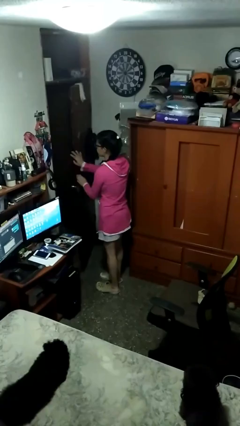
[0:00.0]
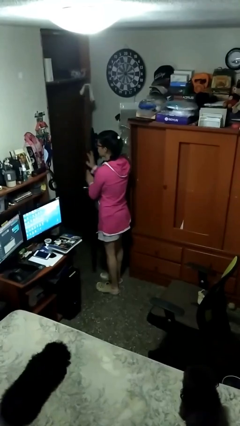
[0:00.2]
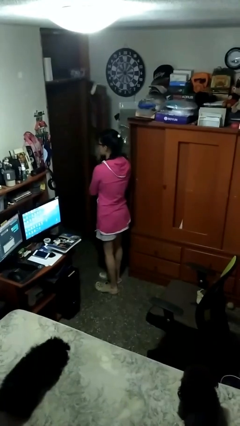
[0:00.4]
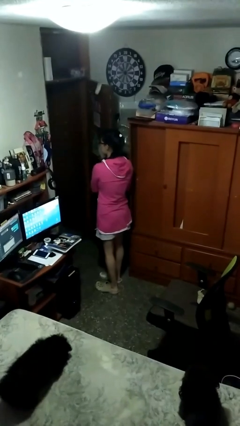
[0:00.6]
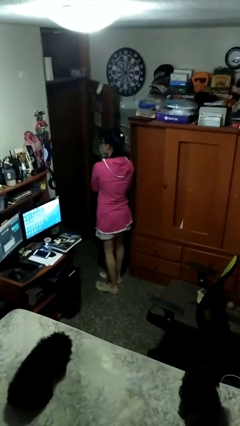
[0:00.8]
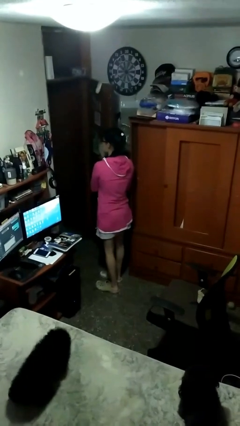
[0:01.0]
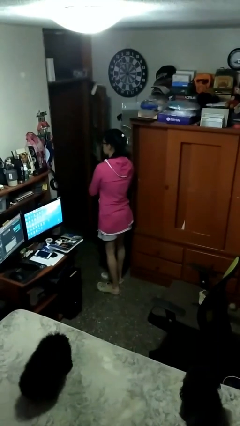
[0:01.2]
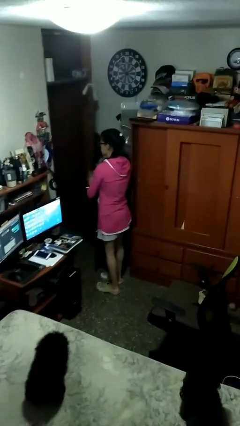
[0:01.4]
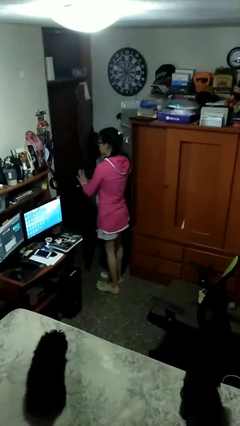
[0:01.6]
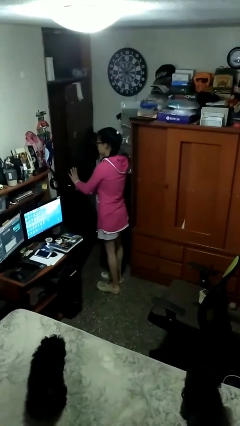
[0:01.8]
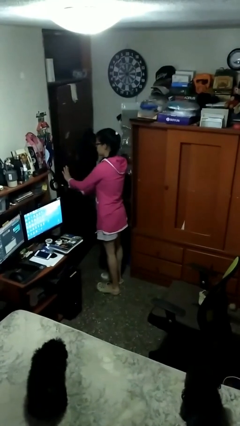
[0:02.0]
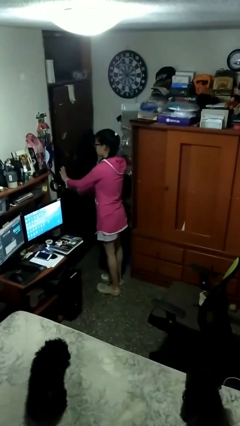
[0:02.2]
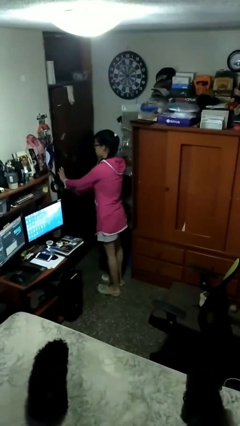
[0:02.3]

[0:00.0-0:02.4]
person opens facility door

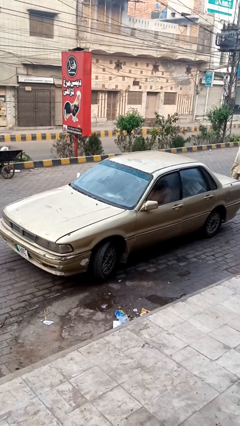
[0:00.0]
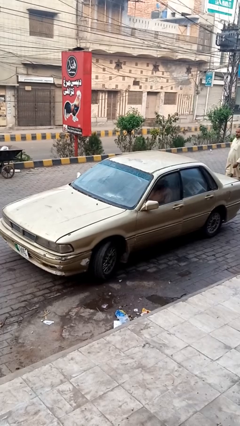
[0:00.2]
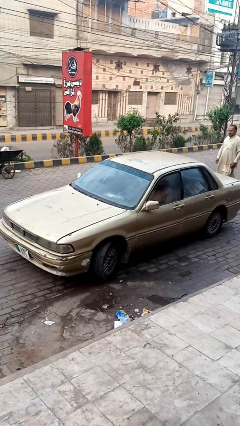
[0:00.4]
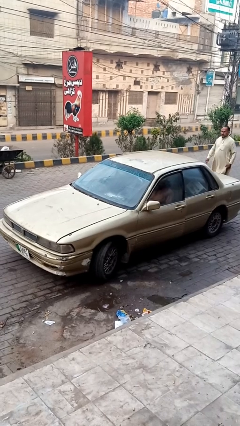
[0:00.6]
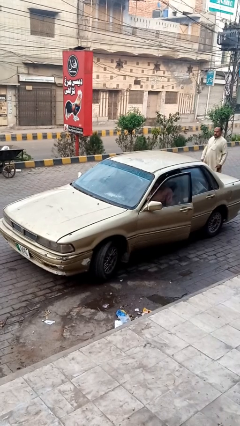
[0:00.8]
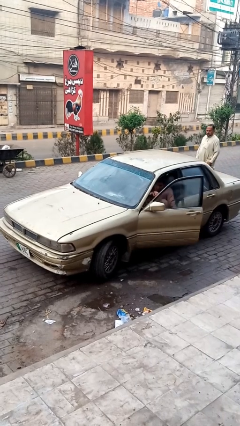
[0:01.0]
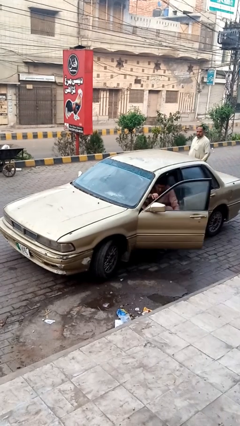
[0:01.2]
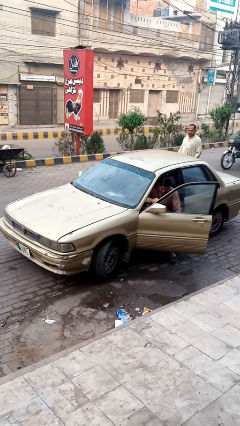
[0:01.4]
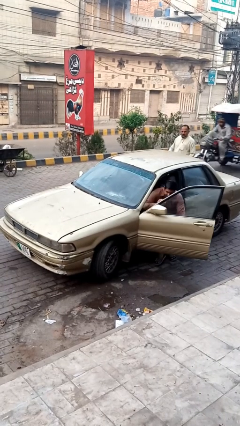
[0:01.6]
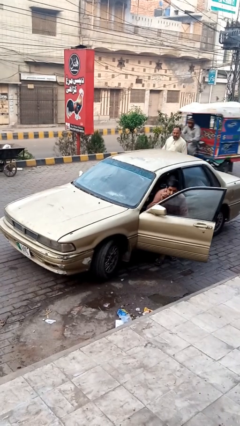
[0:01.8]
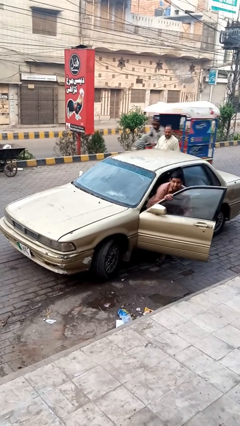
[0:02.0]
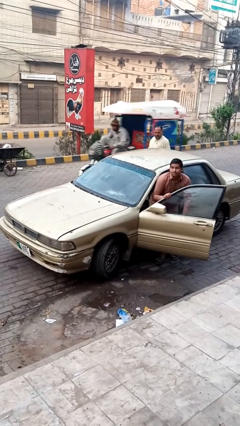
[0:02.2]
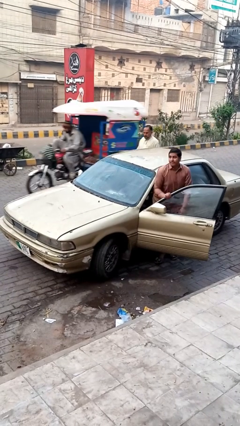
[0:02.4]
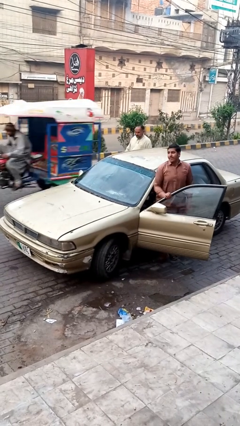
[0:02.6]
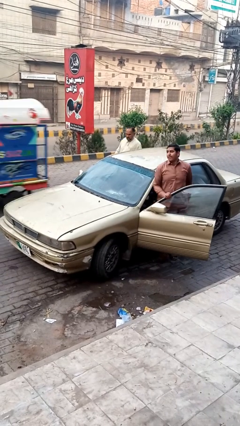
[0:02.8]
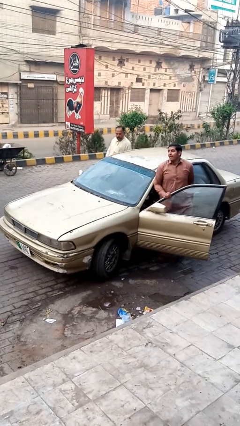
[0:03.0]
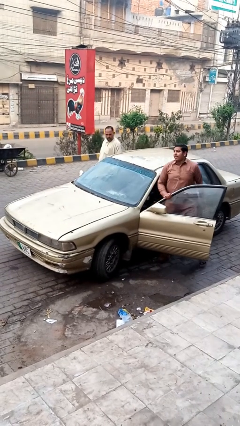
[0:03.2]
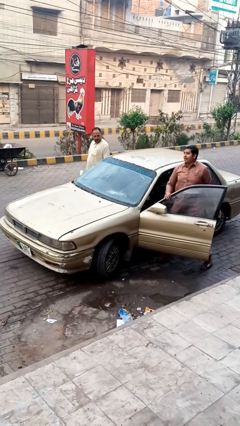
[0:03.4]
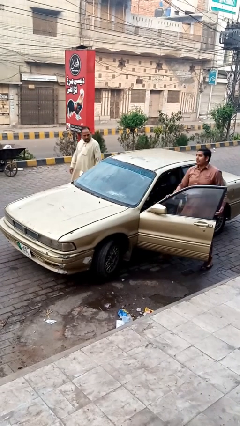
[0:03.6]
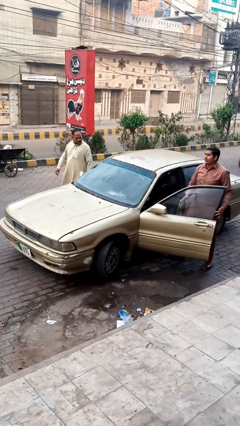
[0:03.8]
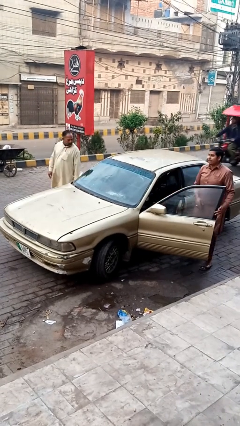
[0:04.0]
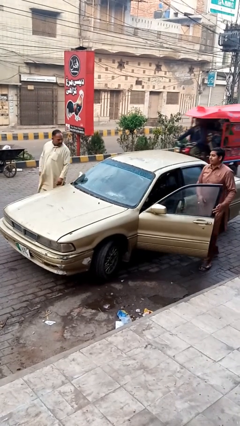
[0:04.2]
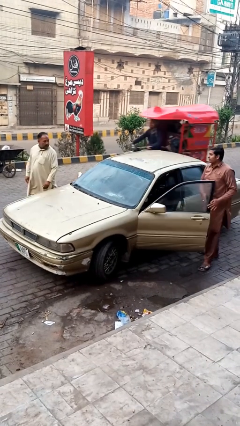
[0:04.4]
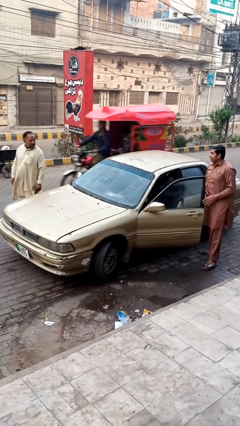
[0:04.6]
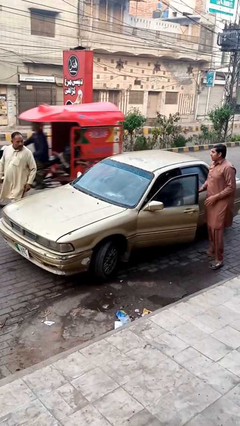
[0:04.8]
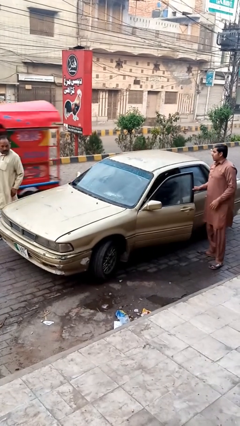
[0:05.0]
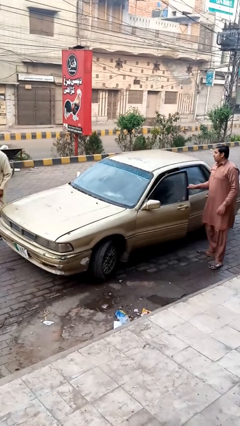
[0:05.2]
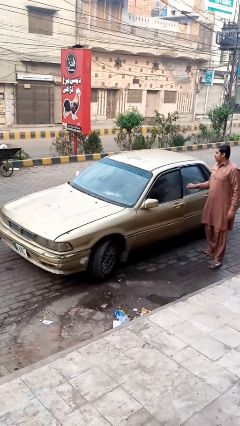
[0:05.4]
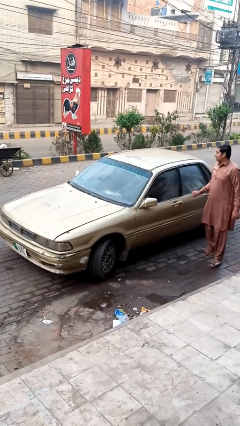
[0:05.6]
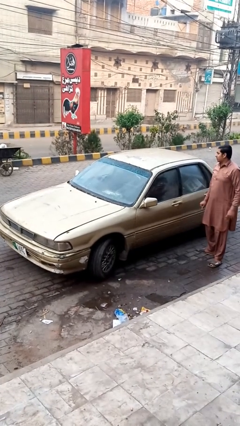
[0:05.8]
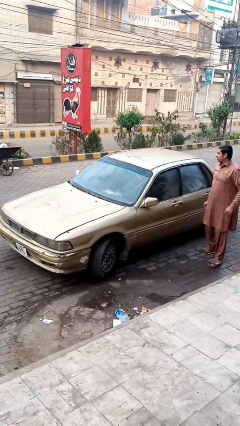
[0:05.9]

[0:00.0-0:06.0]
car drops off person

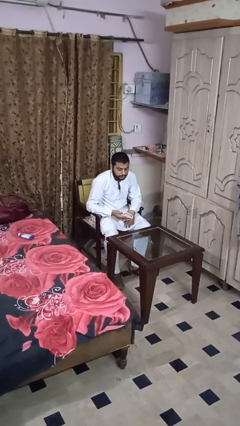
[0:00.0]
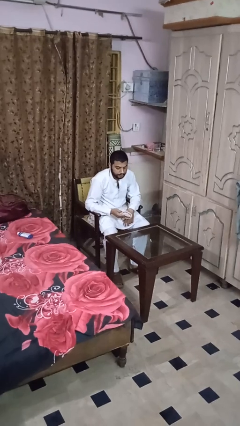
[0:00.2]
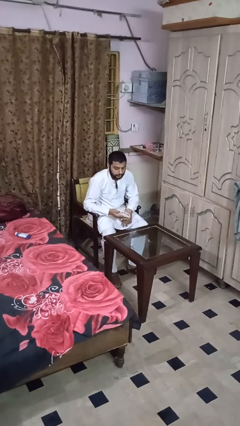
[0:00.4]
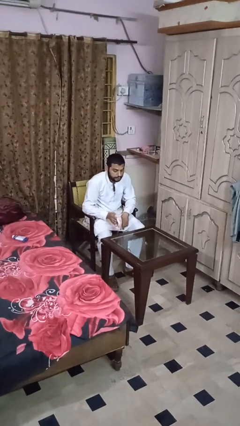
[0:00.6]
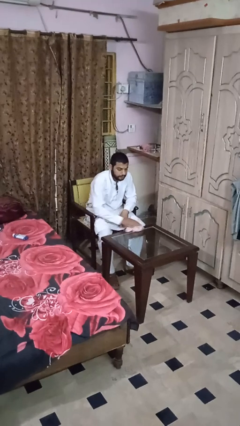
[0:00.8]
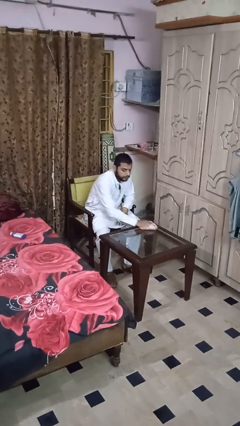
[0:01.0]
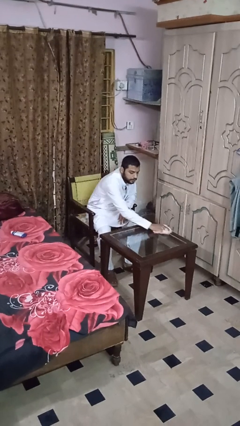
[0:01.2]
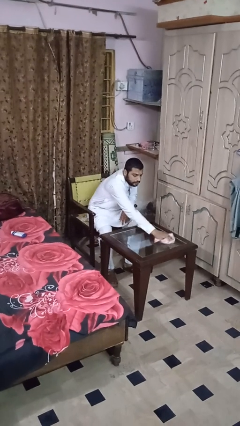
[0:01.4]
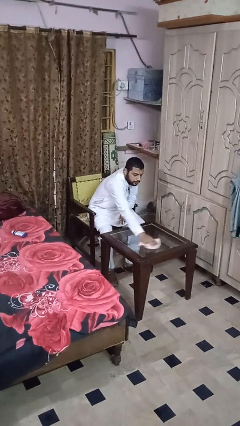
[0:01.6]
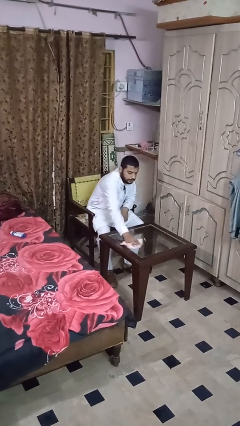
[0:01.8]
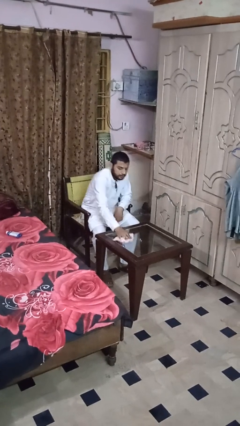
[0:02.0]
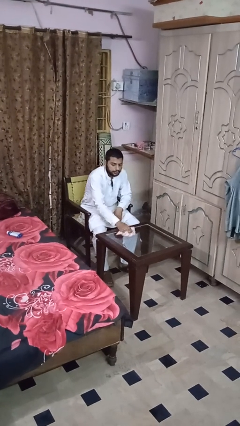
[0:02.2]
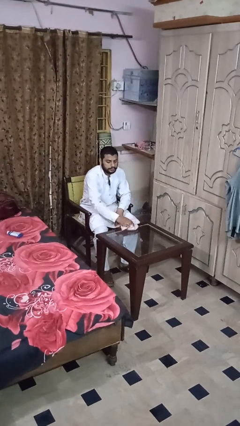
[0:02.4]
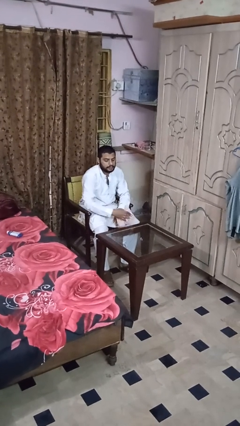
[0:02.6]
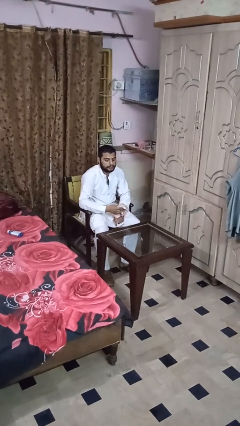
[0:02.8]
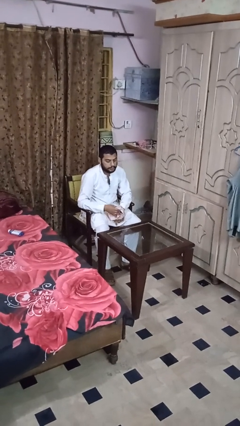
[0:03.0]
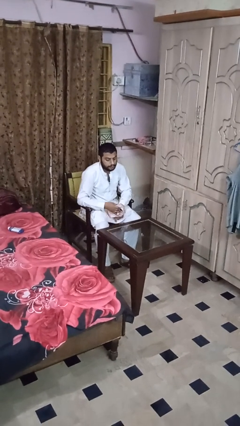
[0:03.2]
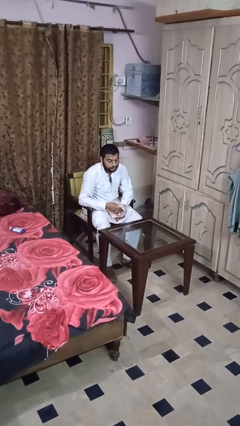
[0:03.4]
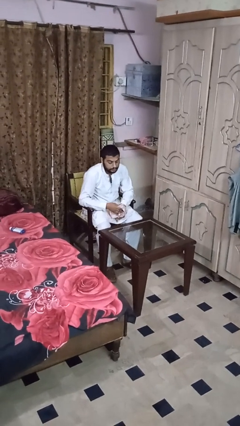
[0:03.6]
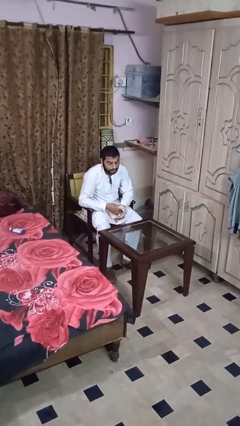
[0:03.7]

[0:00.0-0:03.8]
person cleans table with rag

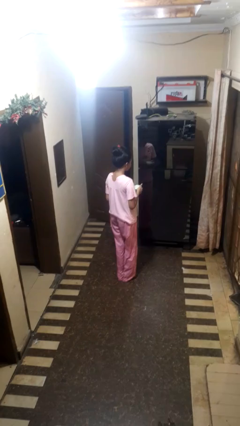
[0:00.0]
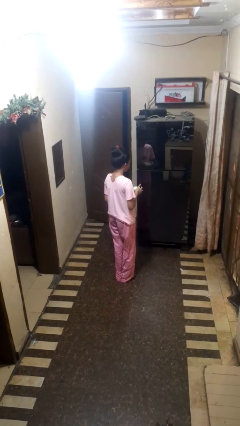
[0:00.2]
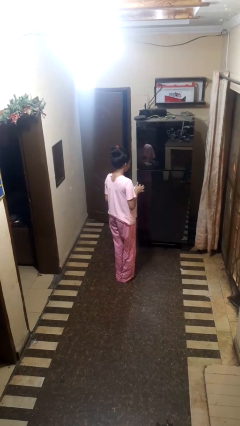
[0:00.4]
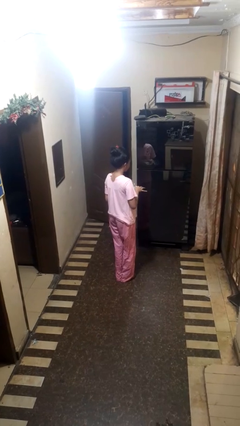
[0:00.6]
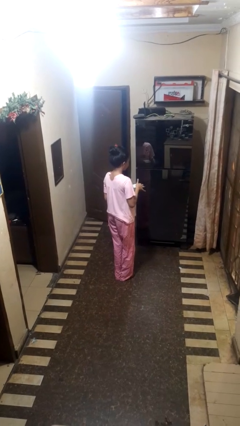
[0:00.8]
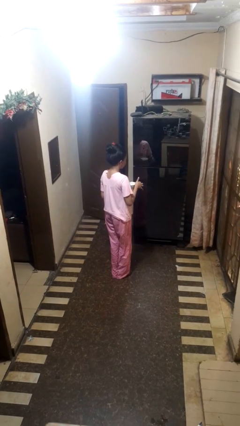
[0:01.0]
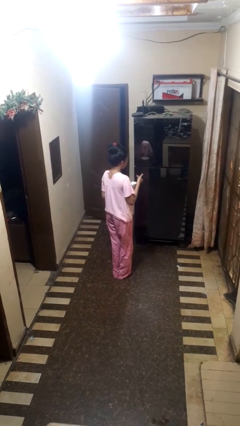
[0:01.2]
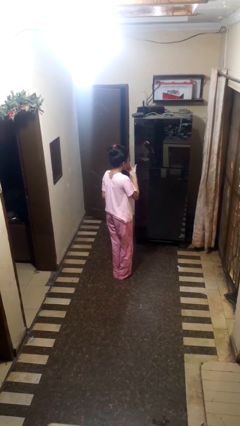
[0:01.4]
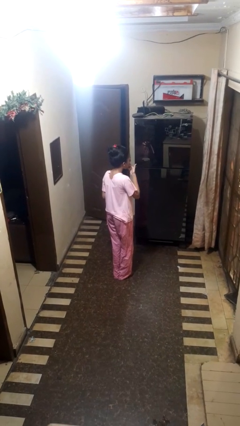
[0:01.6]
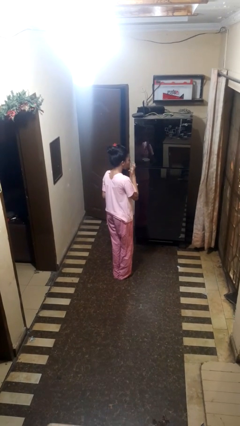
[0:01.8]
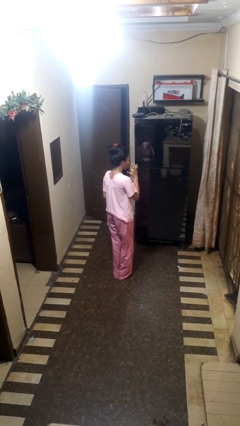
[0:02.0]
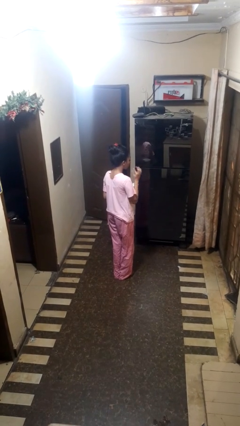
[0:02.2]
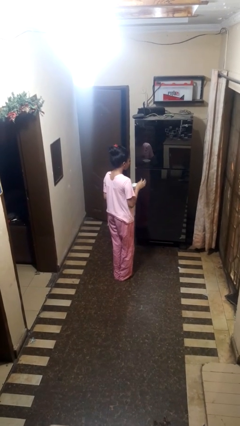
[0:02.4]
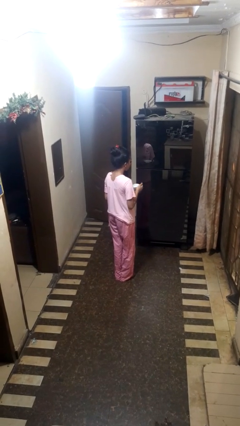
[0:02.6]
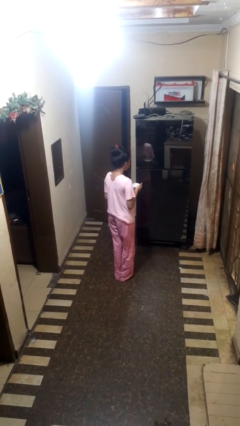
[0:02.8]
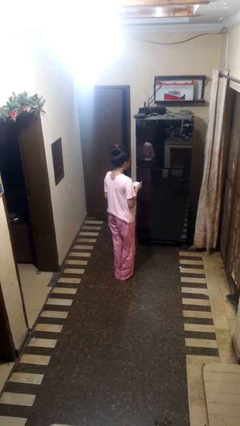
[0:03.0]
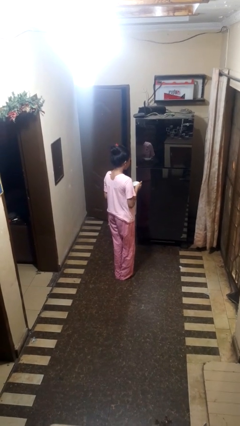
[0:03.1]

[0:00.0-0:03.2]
person licks fingers

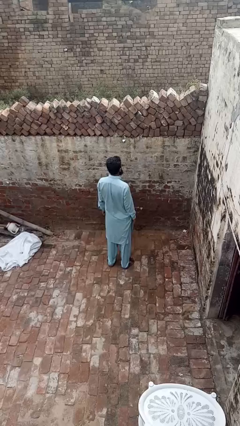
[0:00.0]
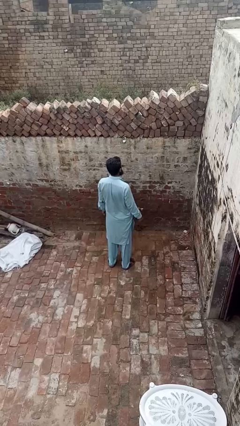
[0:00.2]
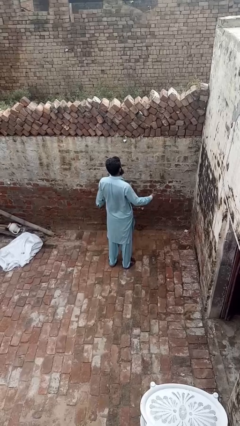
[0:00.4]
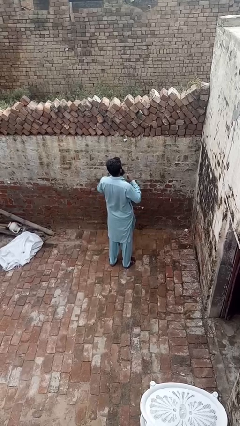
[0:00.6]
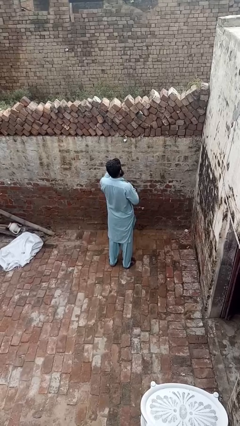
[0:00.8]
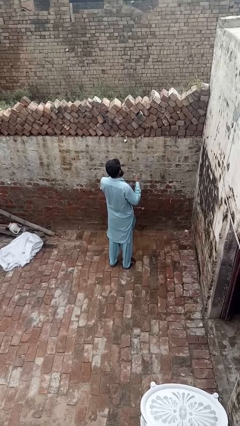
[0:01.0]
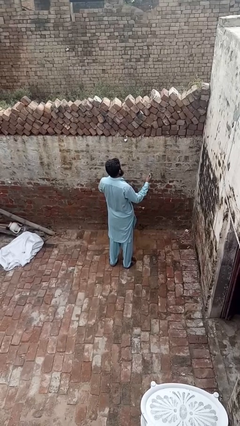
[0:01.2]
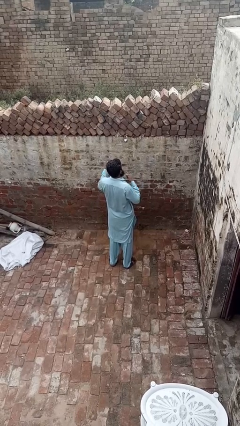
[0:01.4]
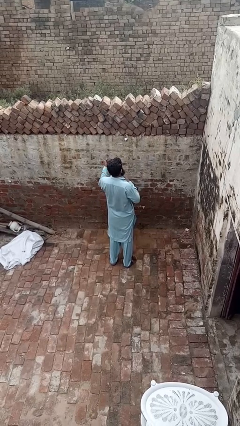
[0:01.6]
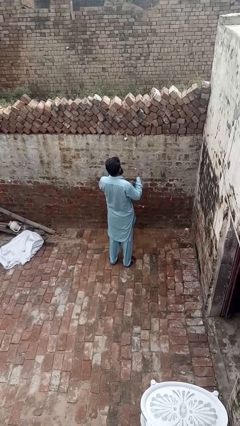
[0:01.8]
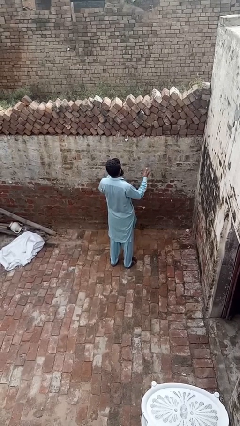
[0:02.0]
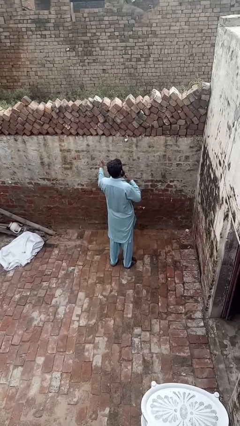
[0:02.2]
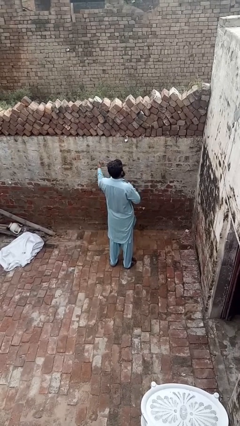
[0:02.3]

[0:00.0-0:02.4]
person drums on chest
